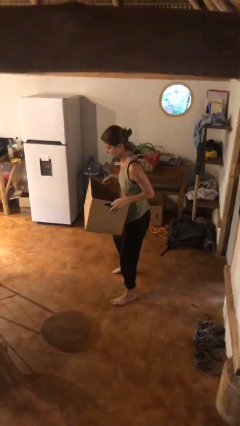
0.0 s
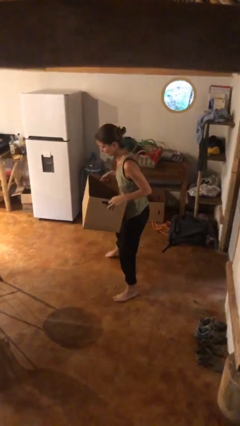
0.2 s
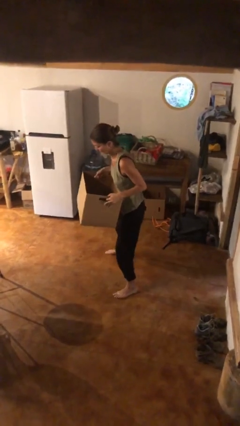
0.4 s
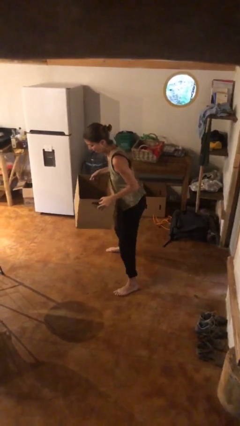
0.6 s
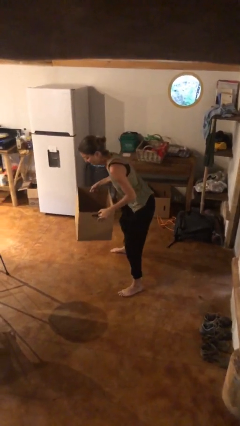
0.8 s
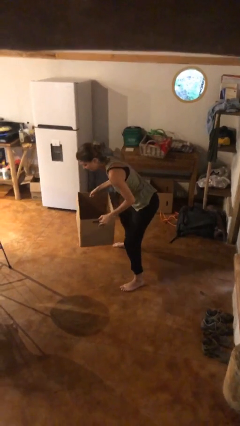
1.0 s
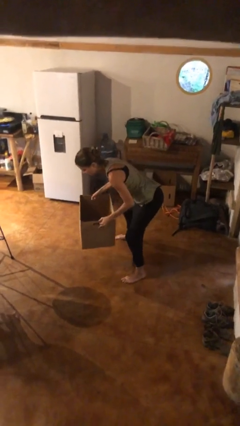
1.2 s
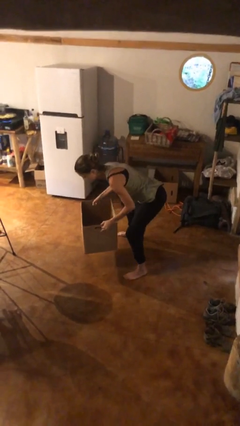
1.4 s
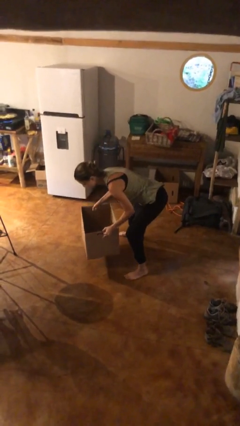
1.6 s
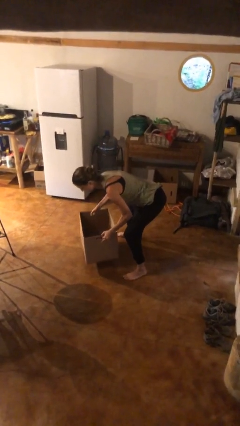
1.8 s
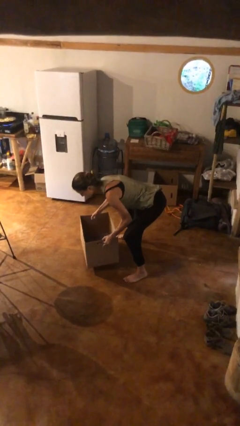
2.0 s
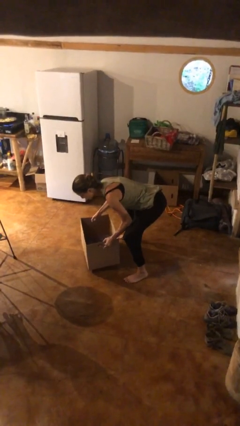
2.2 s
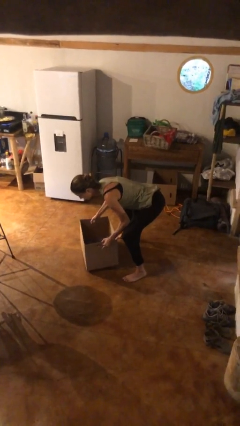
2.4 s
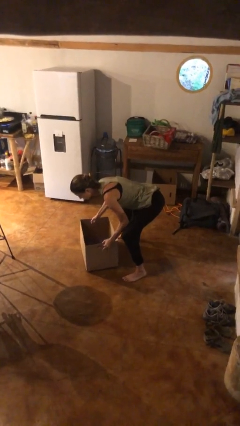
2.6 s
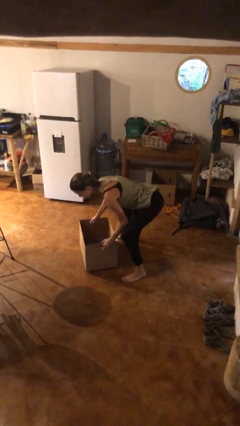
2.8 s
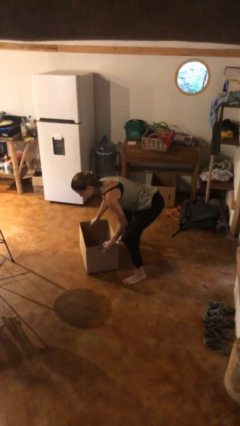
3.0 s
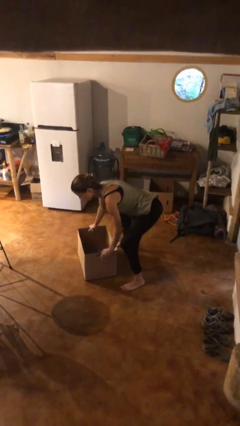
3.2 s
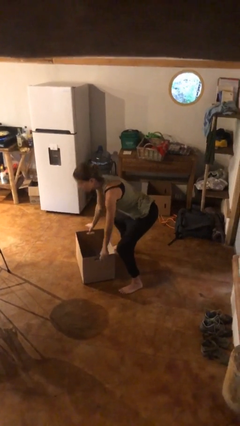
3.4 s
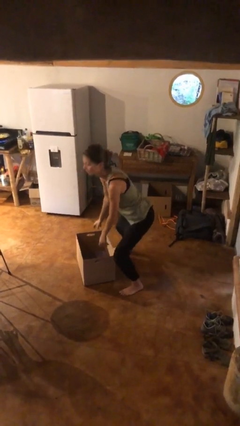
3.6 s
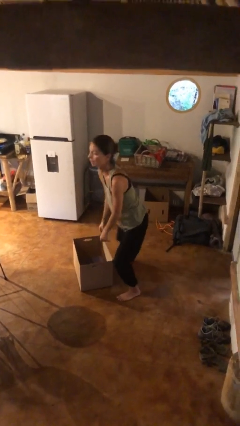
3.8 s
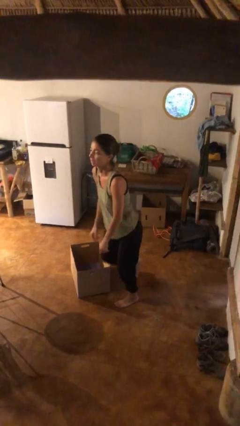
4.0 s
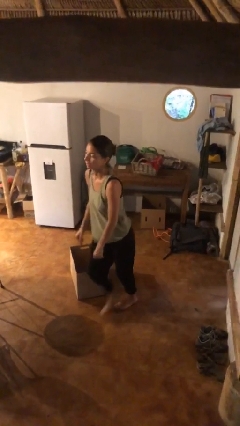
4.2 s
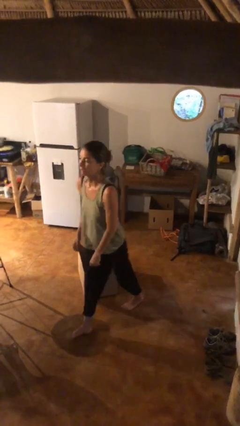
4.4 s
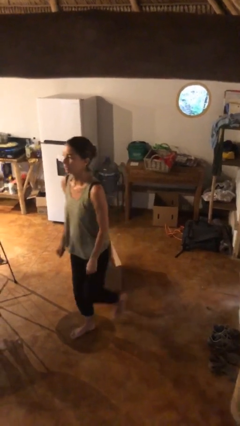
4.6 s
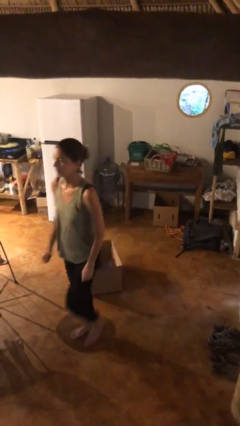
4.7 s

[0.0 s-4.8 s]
person puts down object on floor

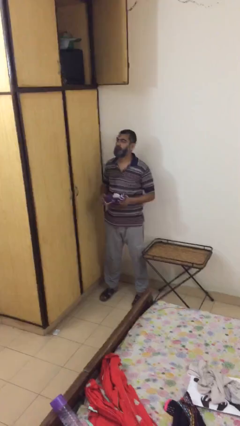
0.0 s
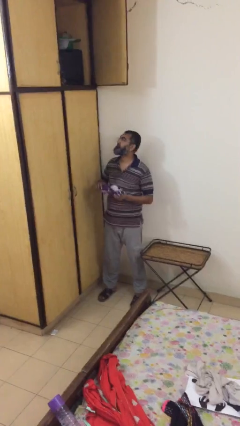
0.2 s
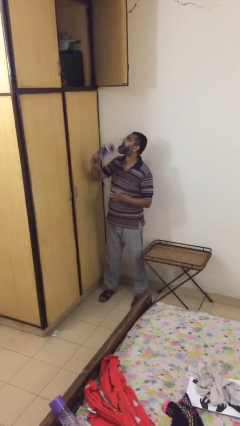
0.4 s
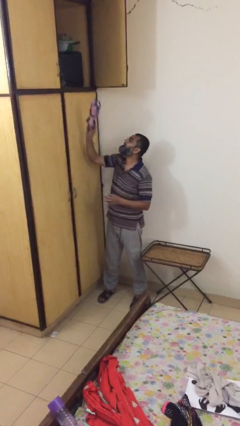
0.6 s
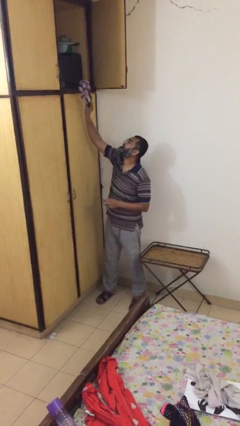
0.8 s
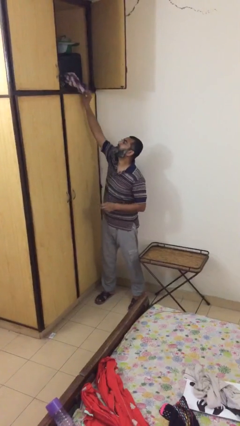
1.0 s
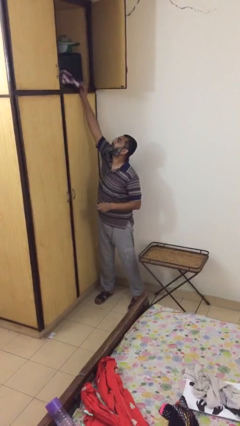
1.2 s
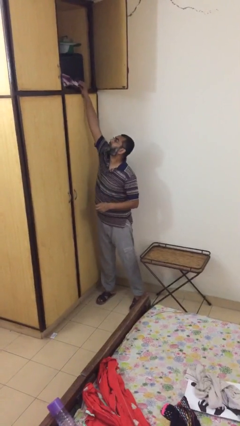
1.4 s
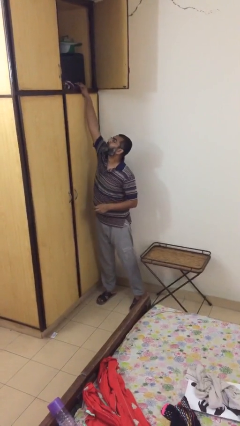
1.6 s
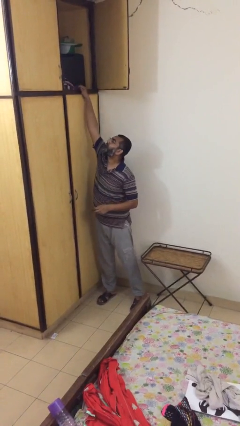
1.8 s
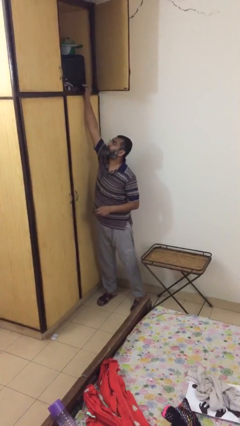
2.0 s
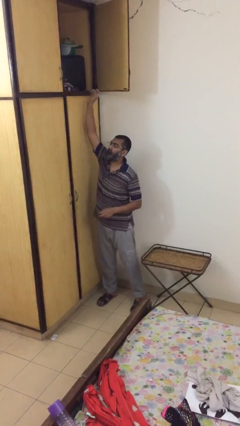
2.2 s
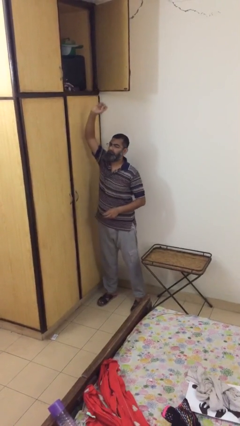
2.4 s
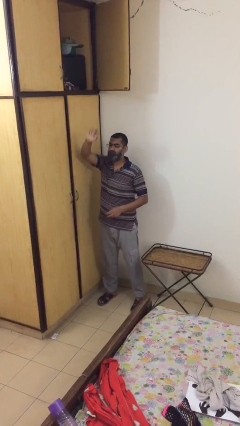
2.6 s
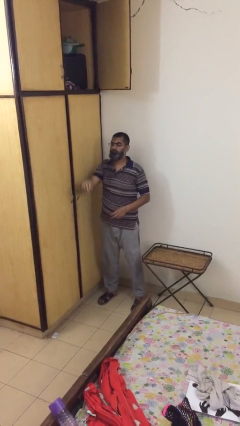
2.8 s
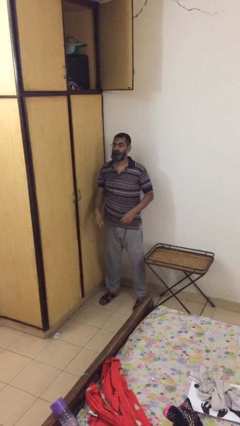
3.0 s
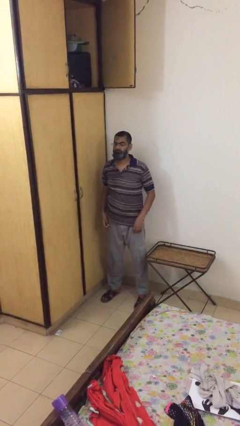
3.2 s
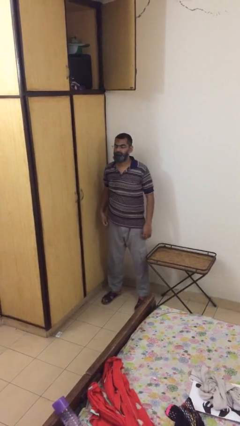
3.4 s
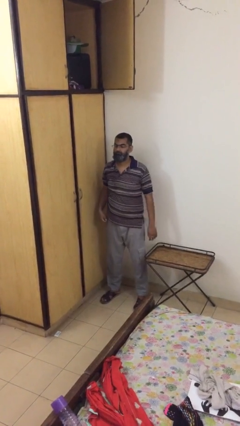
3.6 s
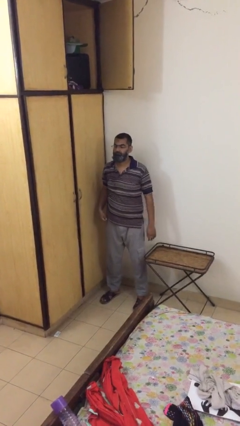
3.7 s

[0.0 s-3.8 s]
person puts down object on shelf

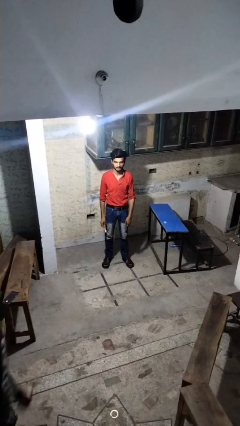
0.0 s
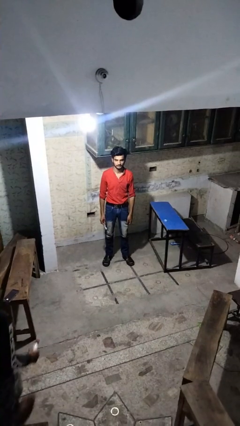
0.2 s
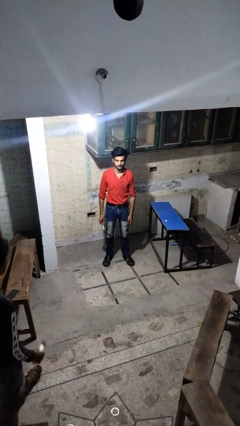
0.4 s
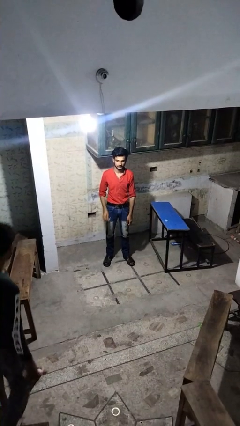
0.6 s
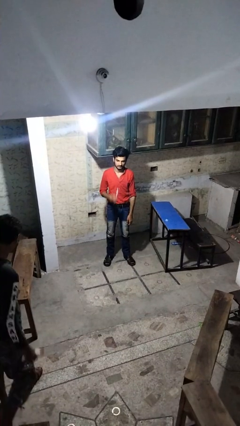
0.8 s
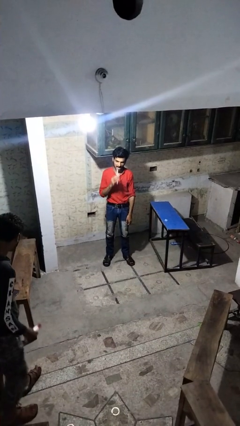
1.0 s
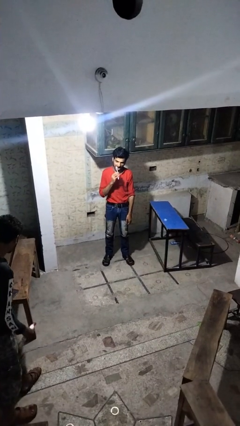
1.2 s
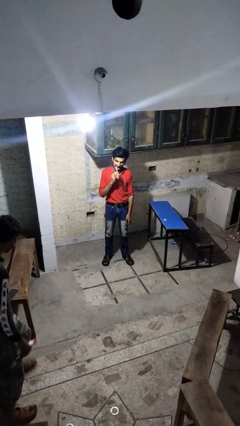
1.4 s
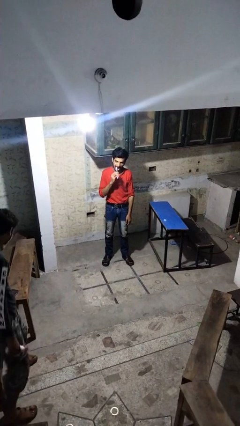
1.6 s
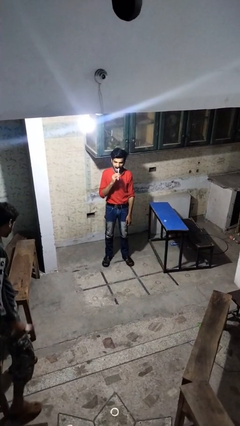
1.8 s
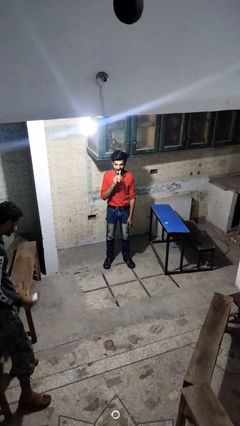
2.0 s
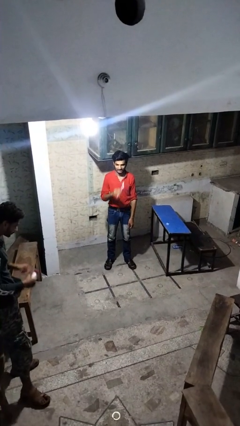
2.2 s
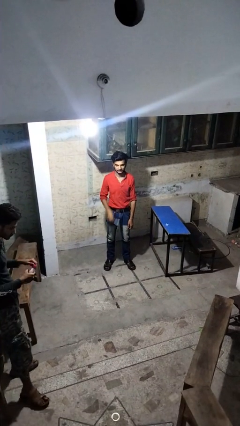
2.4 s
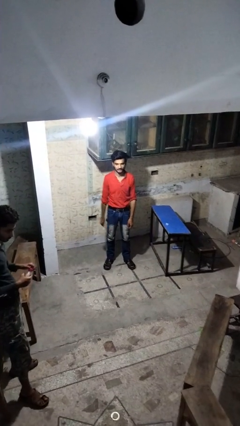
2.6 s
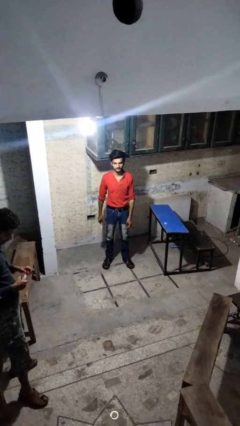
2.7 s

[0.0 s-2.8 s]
person brushes teeth

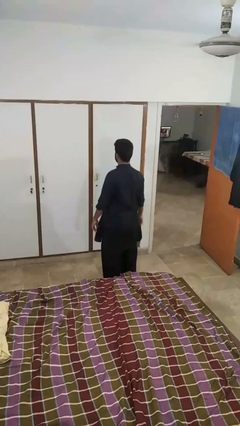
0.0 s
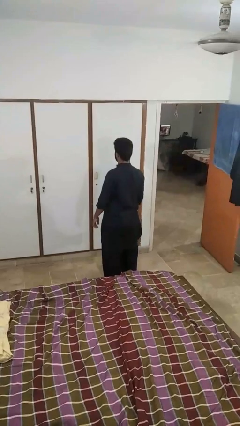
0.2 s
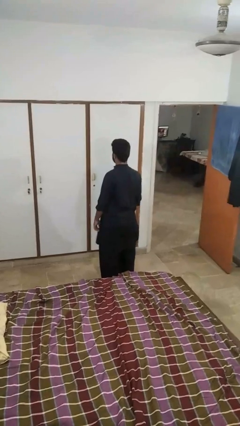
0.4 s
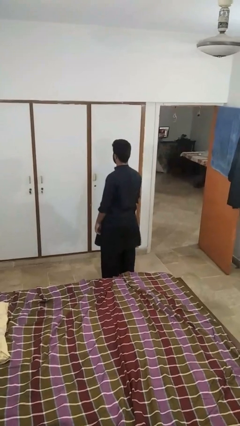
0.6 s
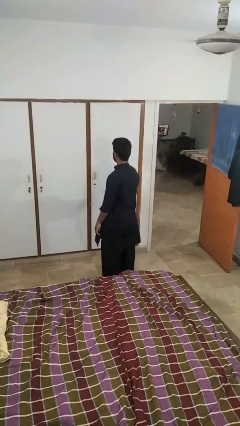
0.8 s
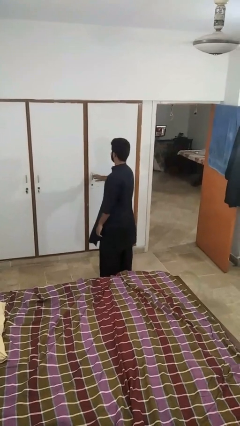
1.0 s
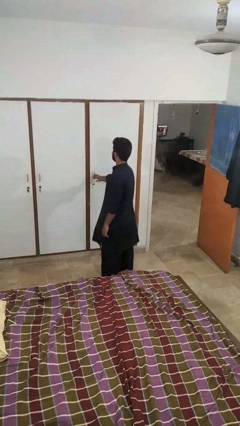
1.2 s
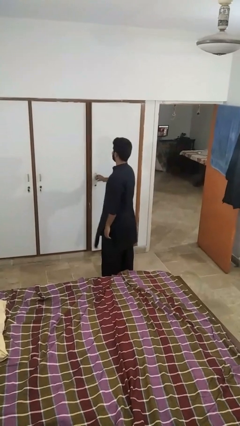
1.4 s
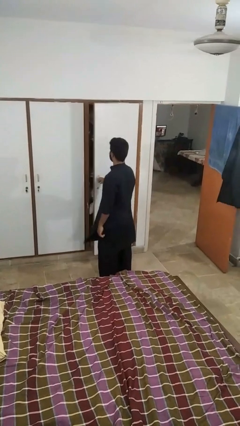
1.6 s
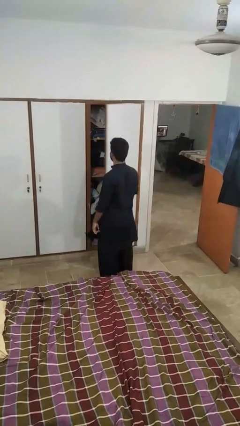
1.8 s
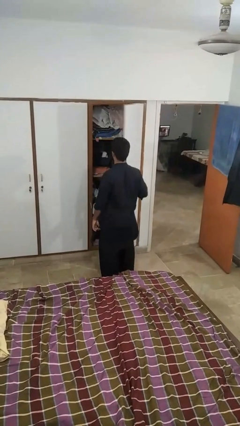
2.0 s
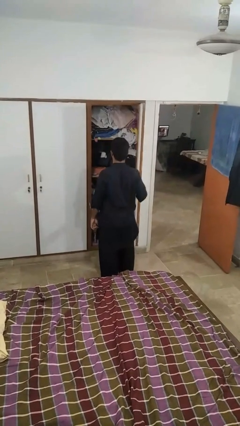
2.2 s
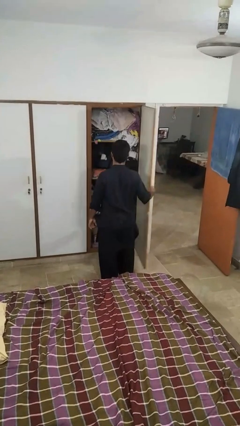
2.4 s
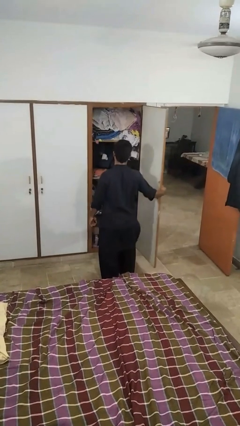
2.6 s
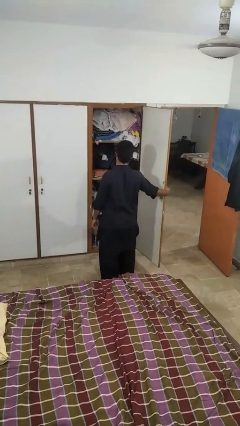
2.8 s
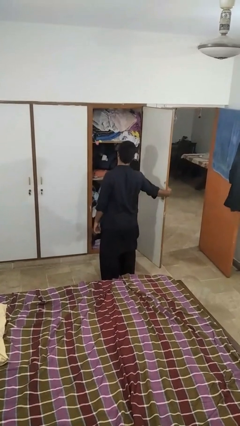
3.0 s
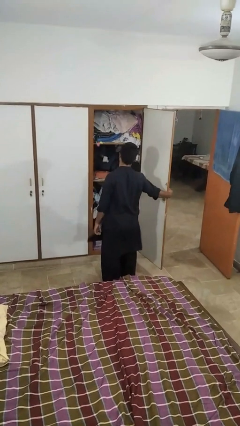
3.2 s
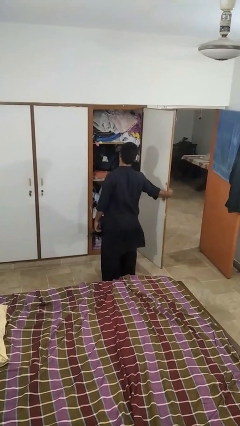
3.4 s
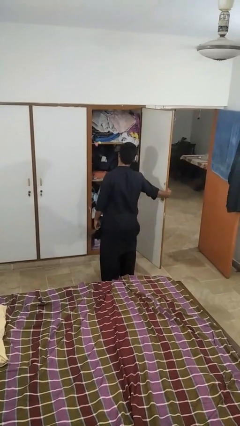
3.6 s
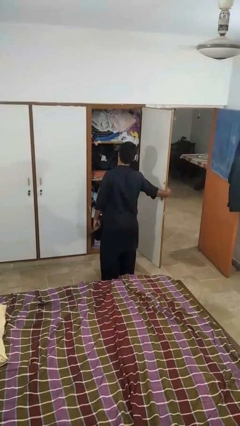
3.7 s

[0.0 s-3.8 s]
person opens closet door

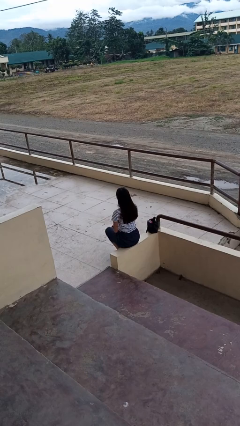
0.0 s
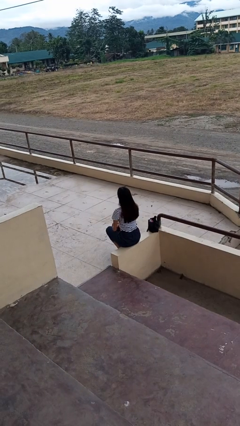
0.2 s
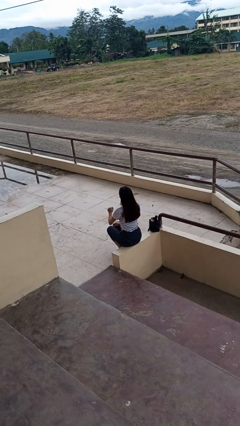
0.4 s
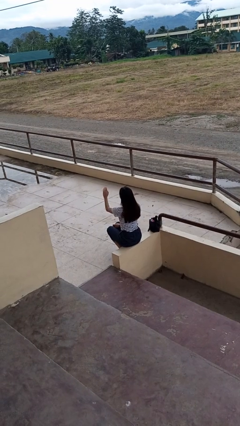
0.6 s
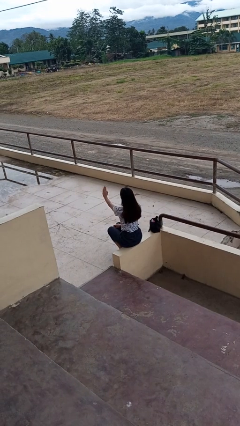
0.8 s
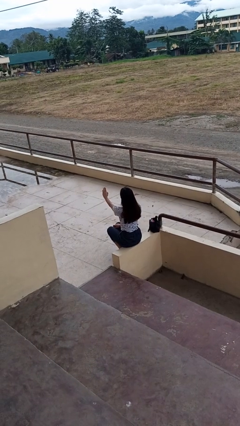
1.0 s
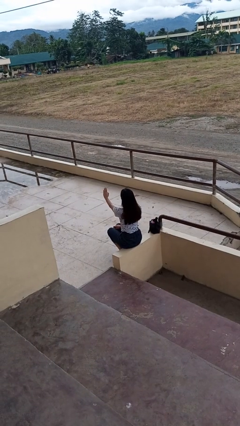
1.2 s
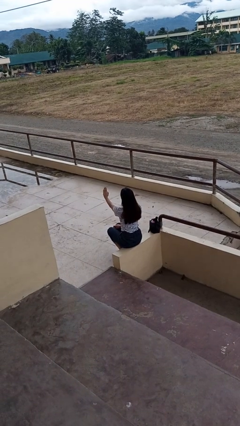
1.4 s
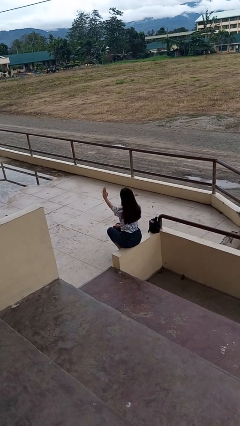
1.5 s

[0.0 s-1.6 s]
person gestures stop

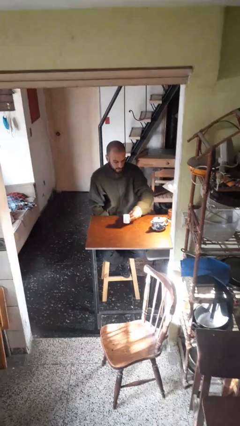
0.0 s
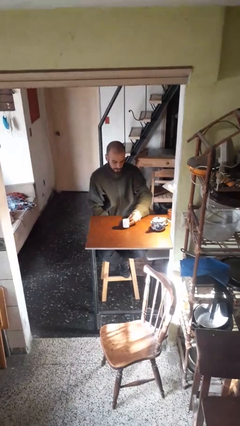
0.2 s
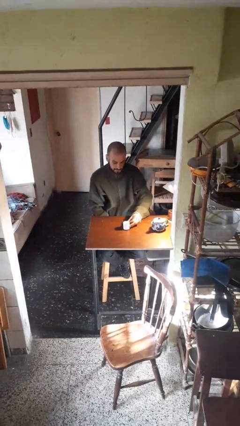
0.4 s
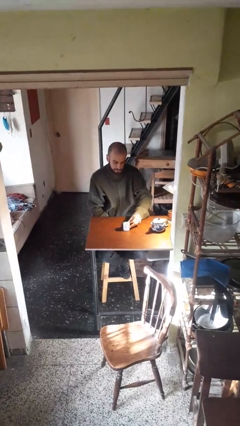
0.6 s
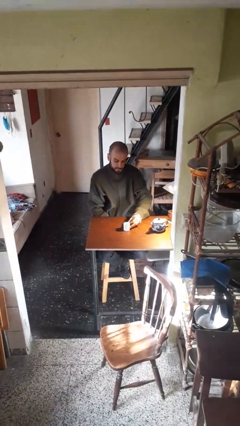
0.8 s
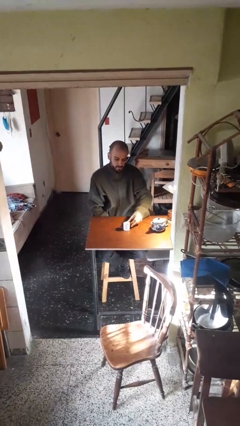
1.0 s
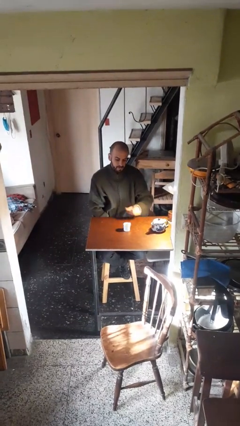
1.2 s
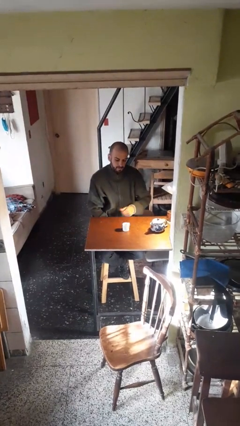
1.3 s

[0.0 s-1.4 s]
person puts down object on table
